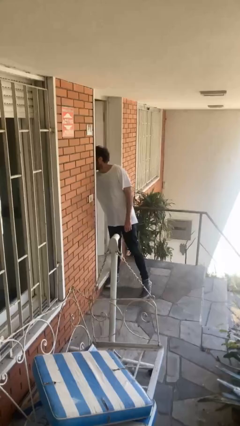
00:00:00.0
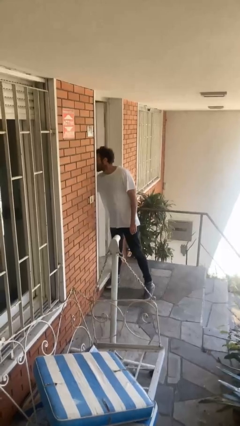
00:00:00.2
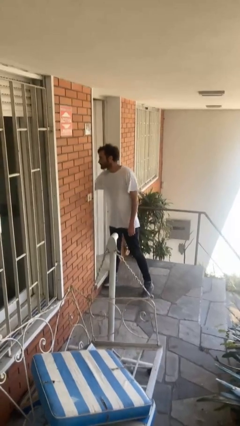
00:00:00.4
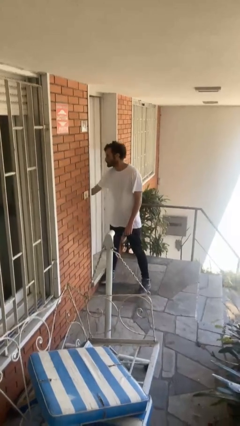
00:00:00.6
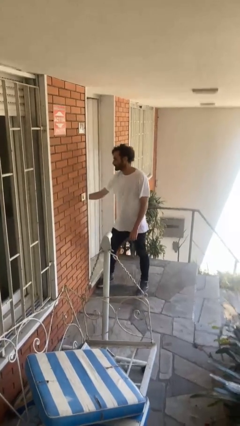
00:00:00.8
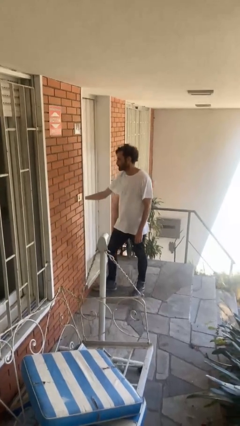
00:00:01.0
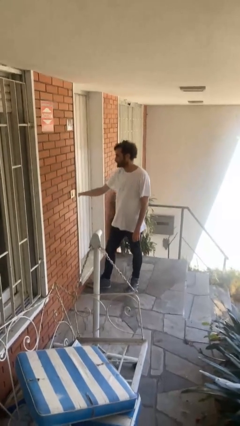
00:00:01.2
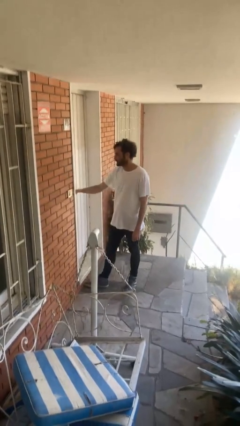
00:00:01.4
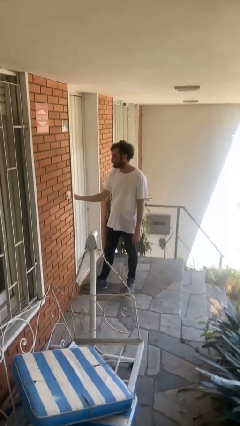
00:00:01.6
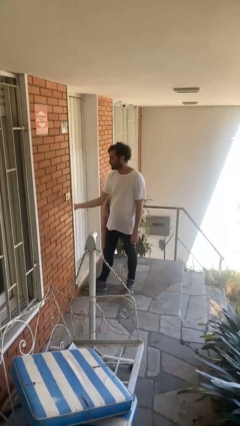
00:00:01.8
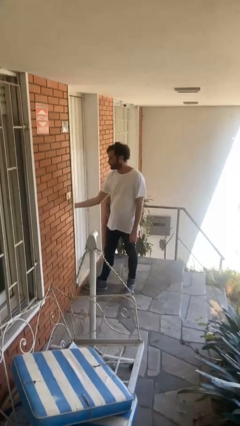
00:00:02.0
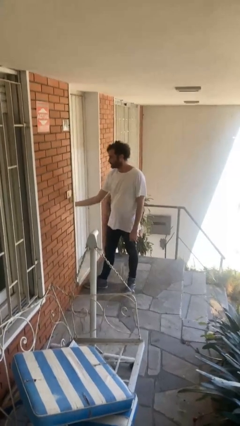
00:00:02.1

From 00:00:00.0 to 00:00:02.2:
person closes facility door

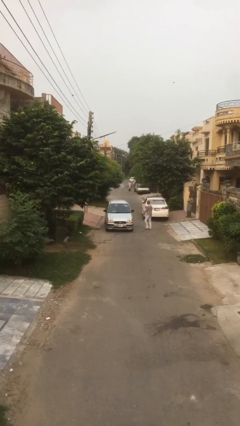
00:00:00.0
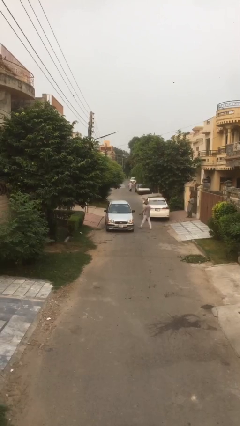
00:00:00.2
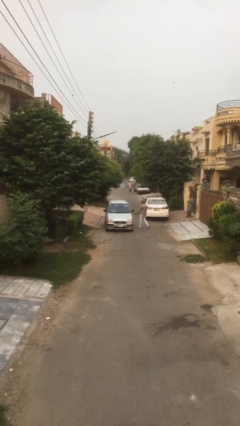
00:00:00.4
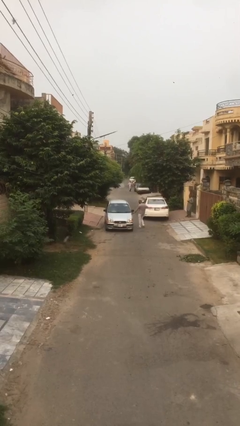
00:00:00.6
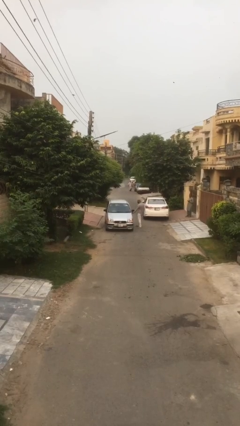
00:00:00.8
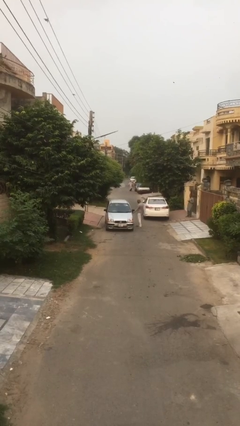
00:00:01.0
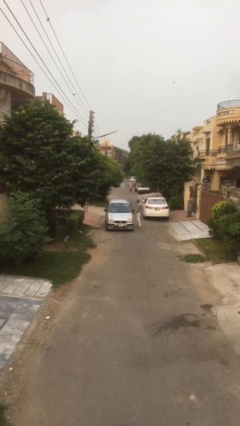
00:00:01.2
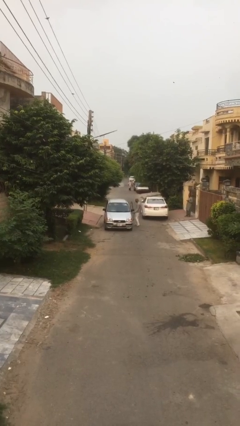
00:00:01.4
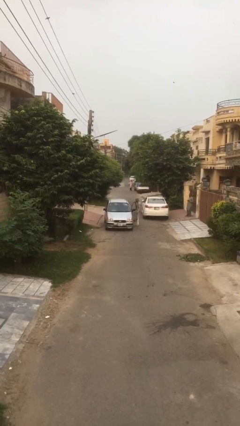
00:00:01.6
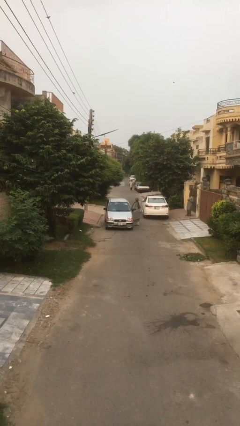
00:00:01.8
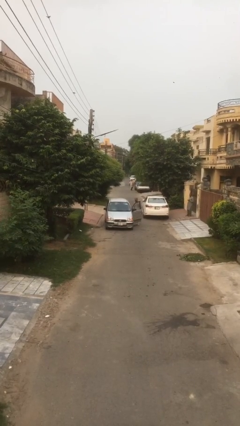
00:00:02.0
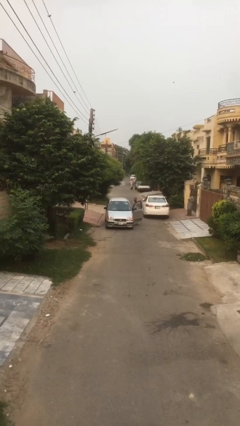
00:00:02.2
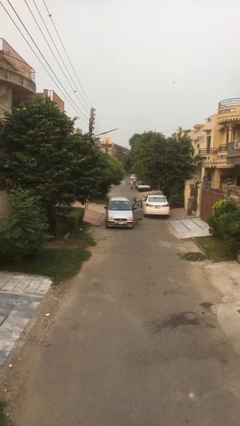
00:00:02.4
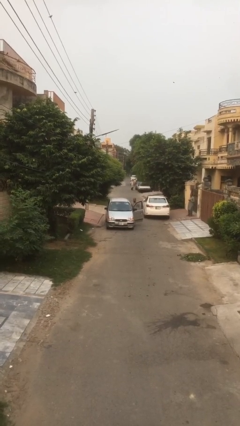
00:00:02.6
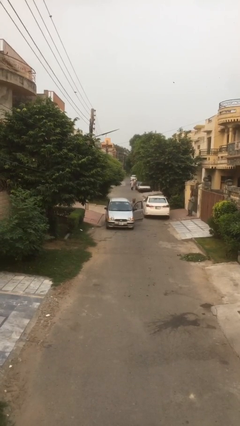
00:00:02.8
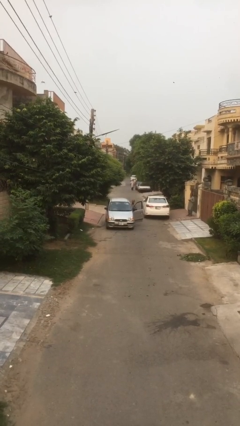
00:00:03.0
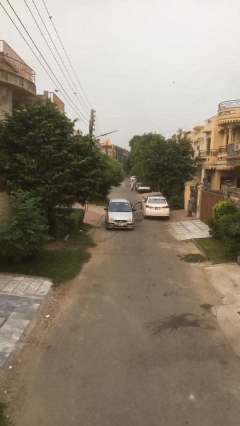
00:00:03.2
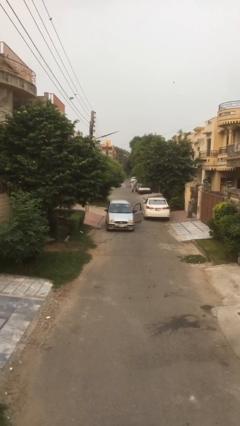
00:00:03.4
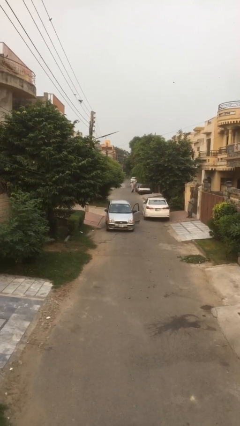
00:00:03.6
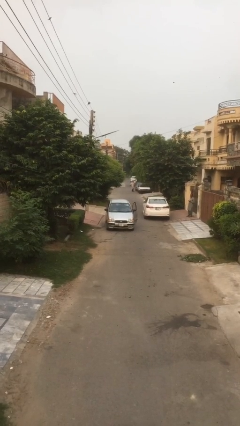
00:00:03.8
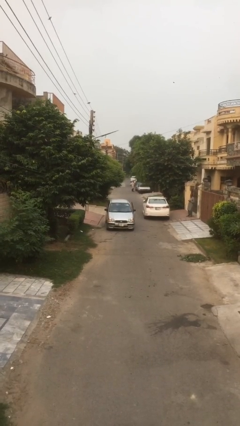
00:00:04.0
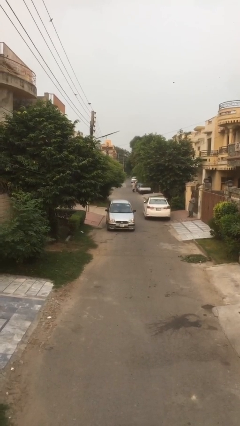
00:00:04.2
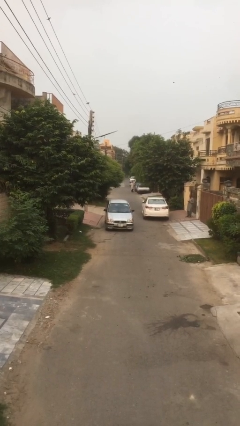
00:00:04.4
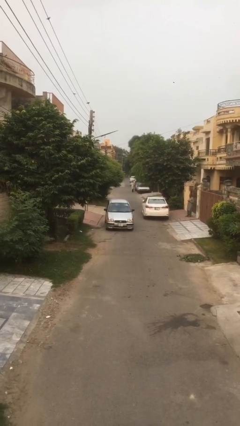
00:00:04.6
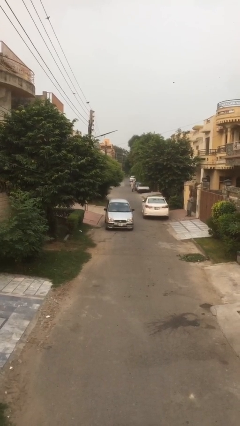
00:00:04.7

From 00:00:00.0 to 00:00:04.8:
car picks up person

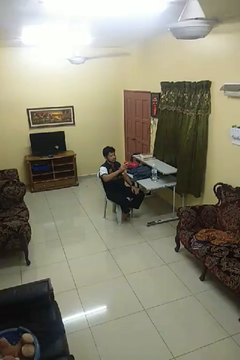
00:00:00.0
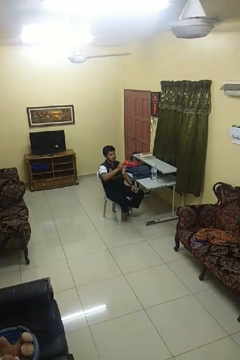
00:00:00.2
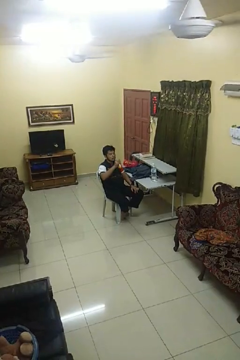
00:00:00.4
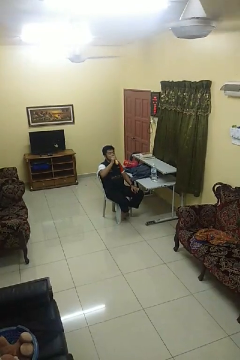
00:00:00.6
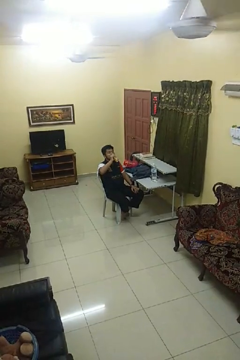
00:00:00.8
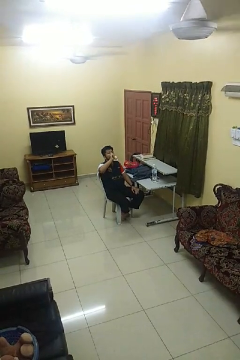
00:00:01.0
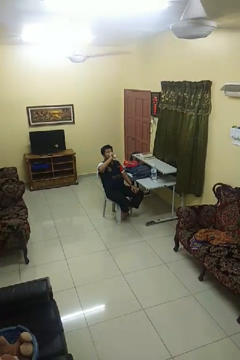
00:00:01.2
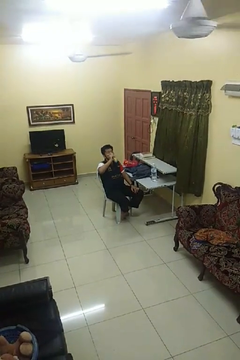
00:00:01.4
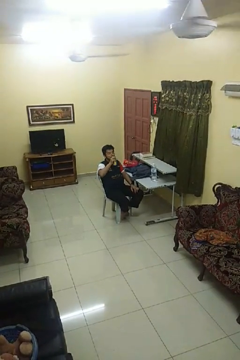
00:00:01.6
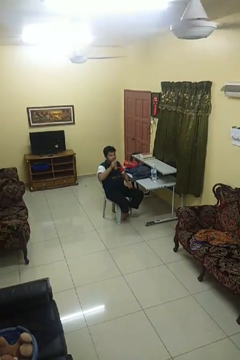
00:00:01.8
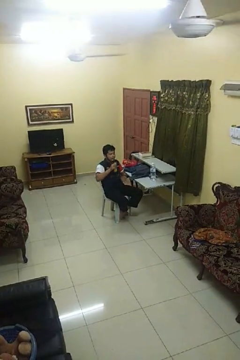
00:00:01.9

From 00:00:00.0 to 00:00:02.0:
person drinks from beverage can

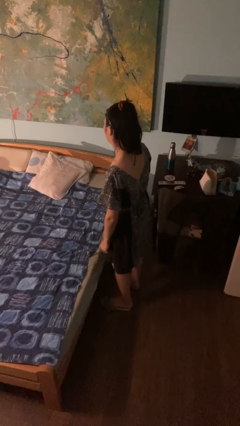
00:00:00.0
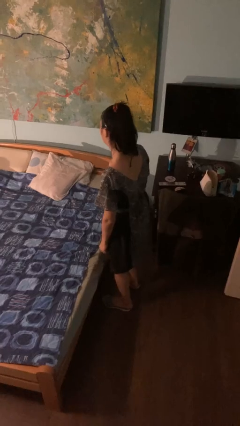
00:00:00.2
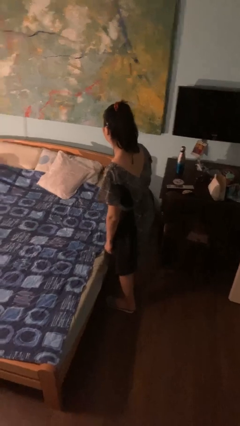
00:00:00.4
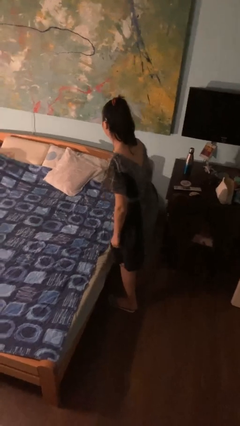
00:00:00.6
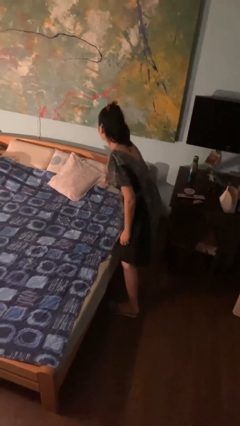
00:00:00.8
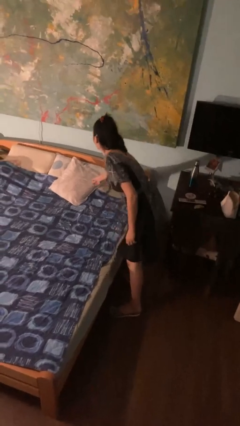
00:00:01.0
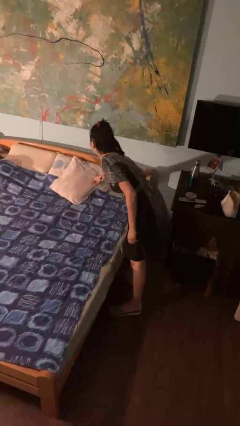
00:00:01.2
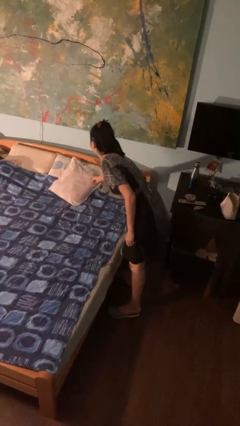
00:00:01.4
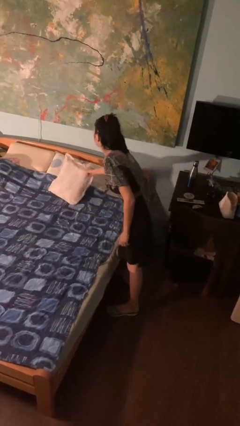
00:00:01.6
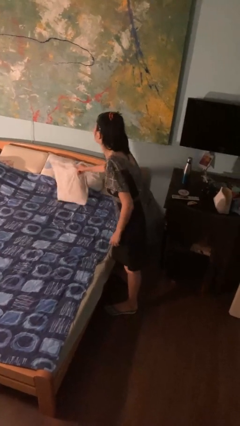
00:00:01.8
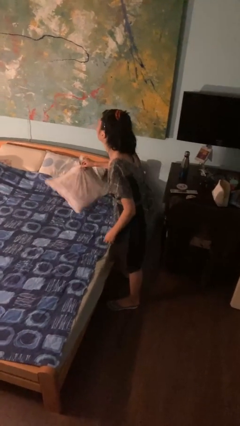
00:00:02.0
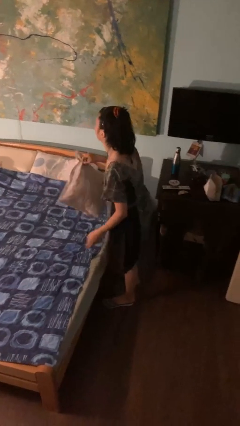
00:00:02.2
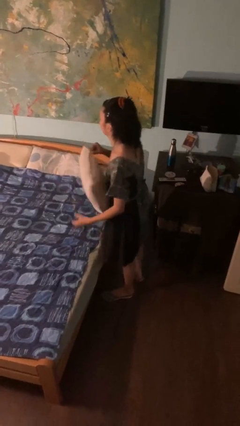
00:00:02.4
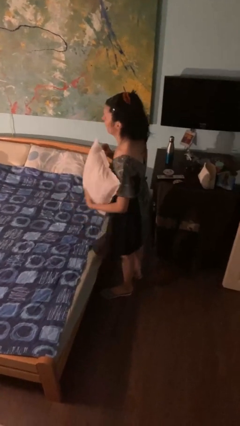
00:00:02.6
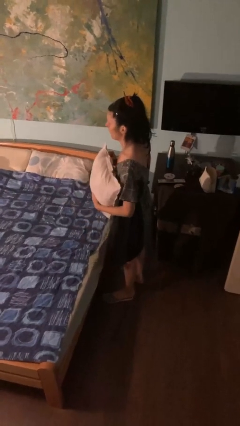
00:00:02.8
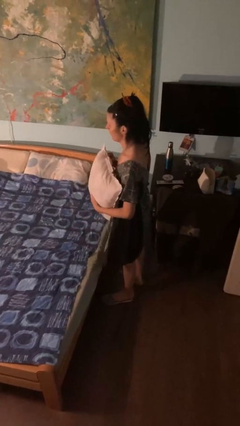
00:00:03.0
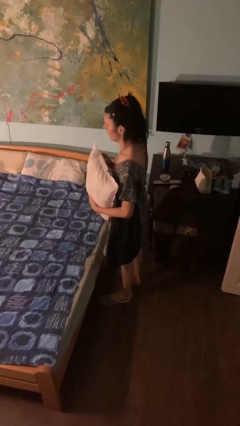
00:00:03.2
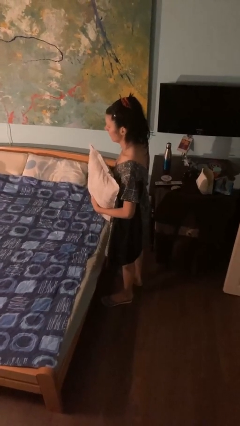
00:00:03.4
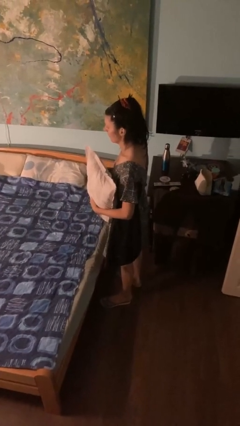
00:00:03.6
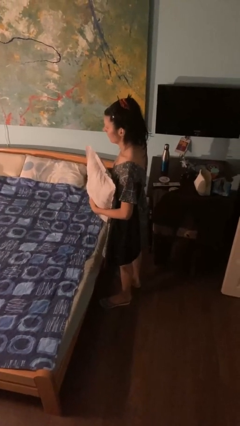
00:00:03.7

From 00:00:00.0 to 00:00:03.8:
person picks up object from bed

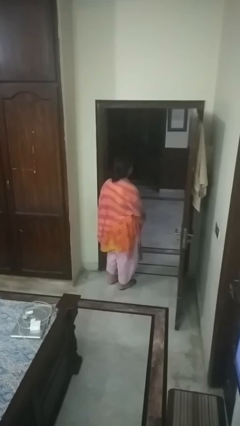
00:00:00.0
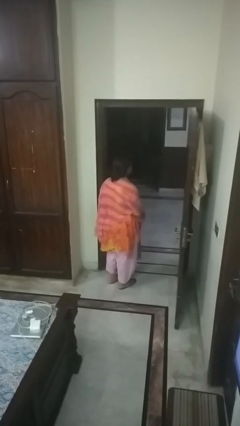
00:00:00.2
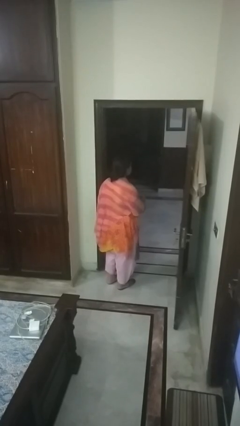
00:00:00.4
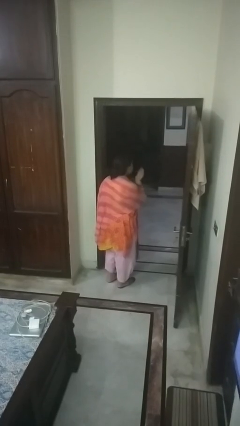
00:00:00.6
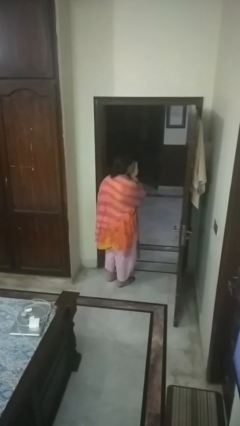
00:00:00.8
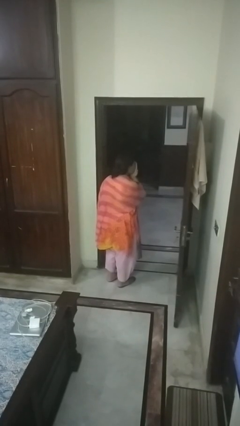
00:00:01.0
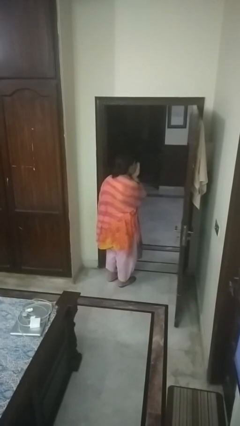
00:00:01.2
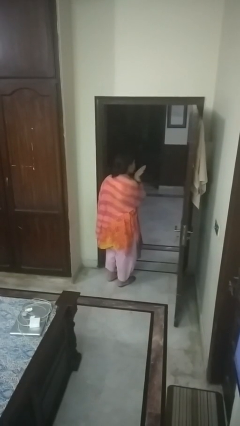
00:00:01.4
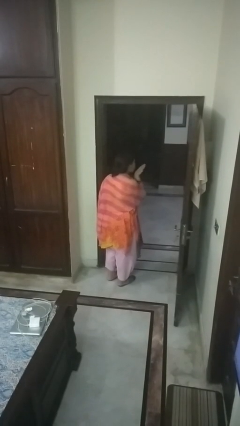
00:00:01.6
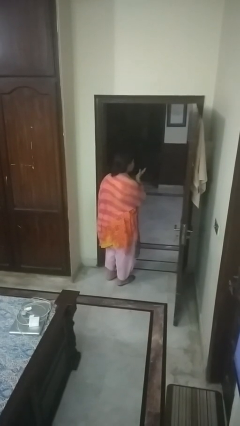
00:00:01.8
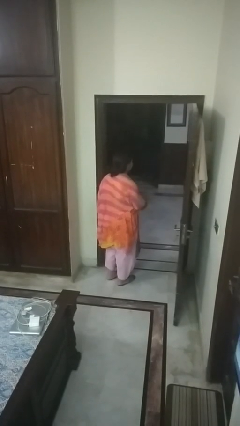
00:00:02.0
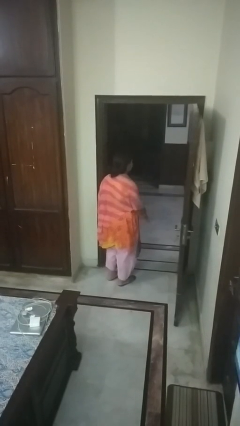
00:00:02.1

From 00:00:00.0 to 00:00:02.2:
person gestures blow kiss

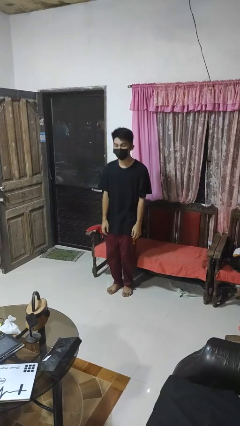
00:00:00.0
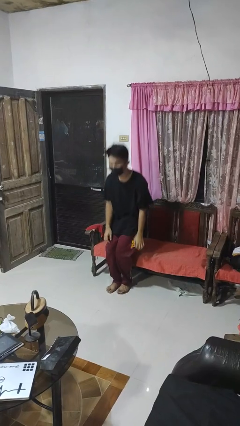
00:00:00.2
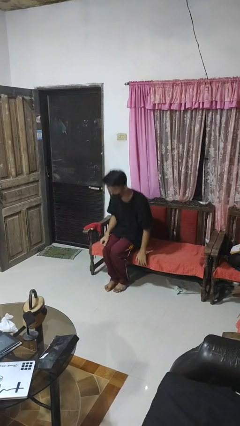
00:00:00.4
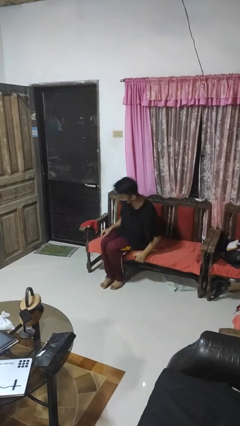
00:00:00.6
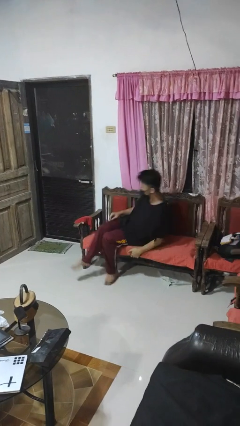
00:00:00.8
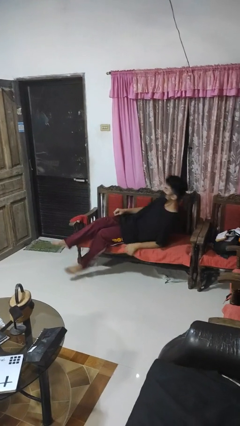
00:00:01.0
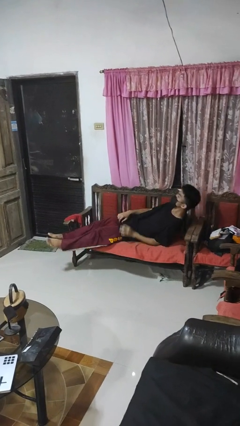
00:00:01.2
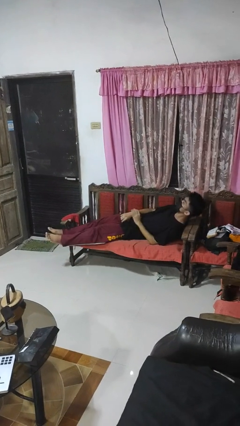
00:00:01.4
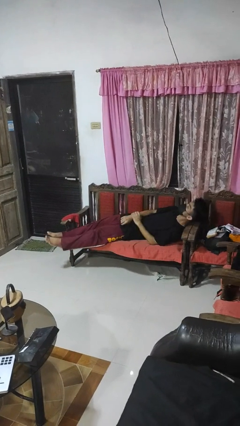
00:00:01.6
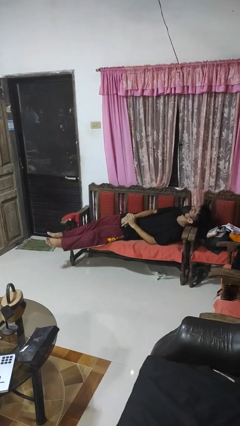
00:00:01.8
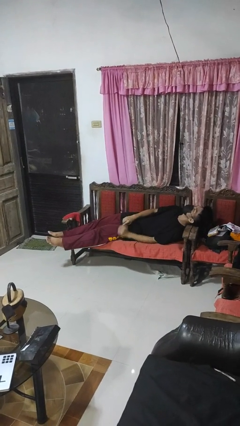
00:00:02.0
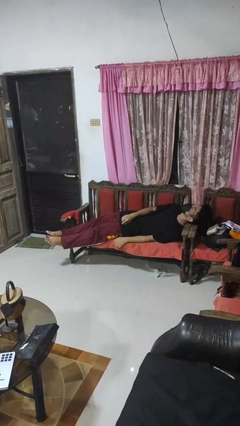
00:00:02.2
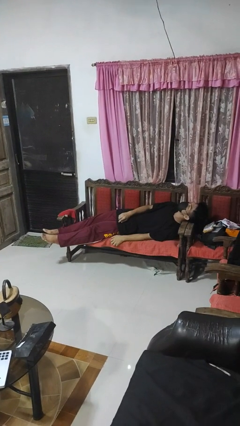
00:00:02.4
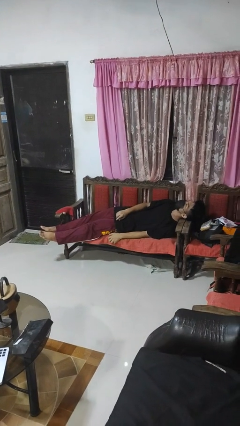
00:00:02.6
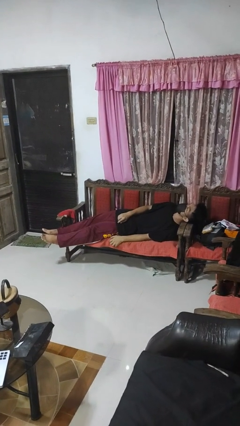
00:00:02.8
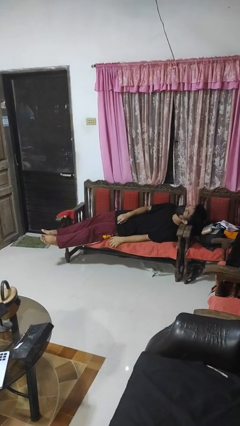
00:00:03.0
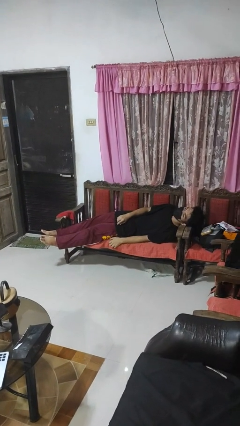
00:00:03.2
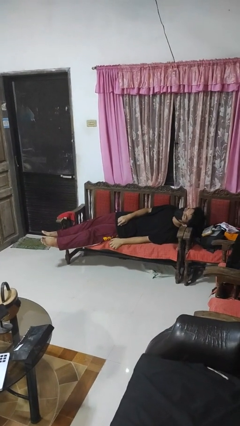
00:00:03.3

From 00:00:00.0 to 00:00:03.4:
person lies down on couch
